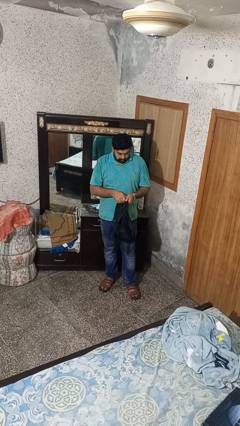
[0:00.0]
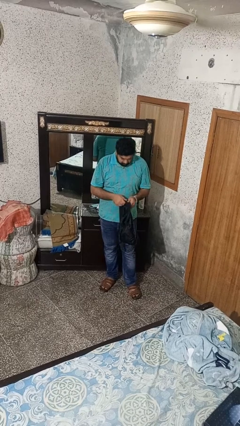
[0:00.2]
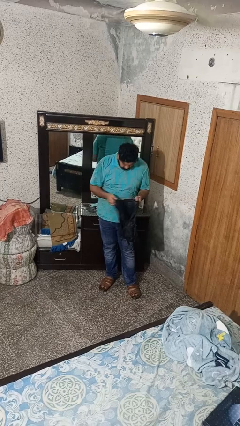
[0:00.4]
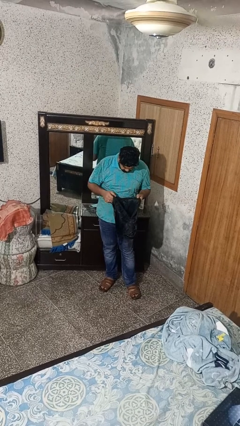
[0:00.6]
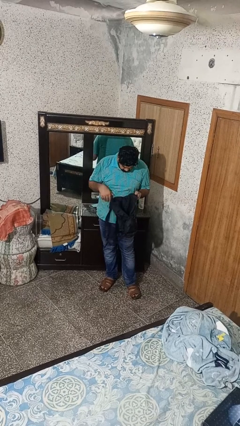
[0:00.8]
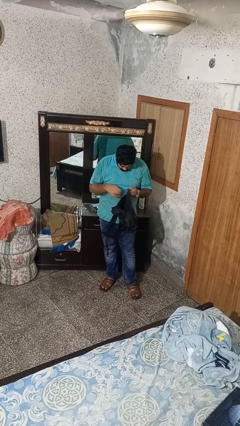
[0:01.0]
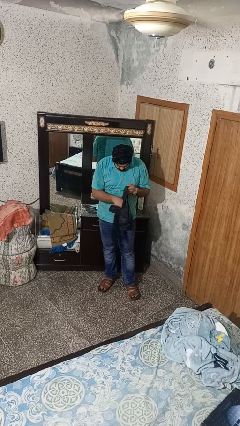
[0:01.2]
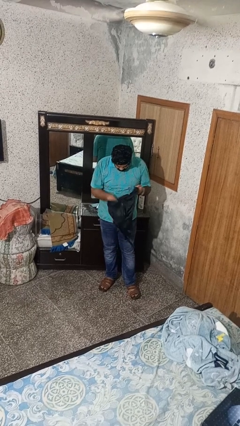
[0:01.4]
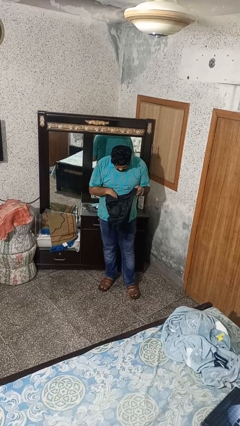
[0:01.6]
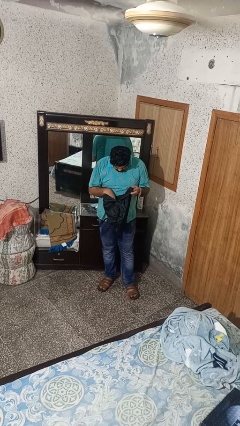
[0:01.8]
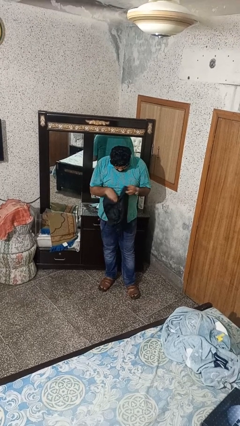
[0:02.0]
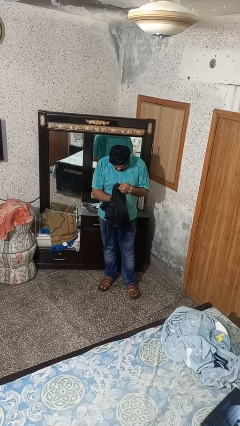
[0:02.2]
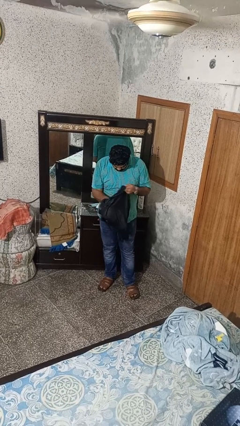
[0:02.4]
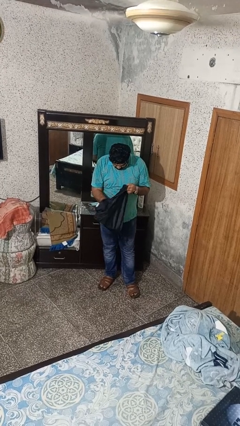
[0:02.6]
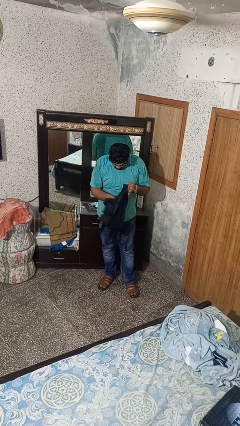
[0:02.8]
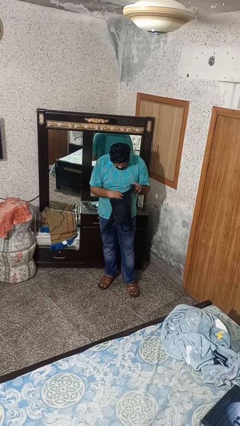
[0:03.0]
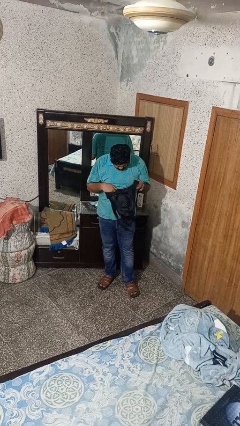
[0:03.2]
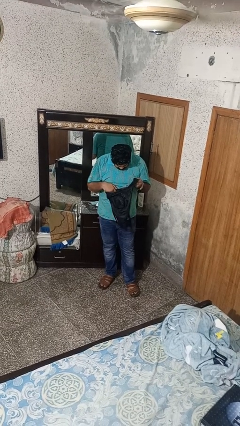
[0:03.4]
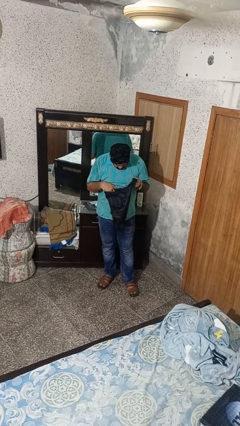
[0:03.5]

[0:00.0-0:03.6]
person searches in backpack

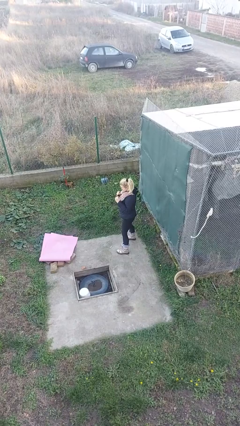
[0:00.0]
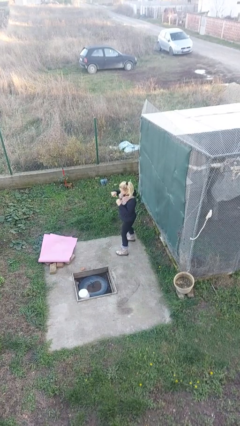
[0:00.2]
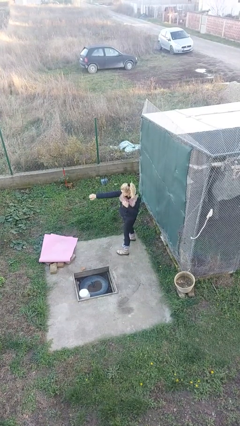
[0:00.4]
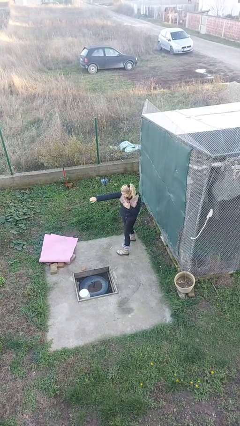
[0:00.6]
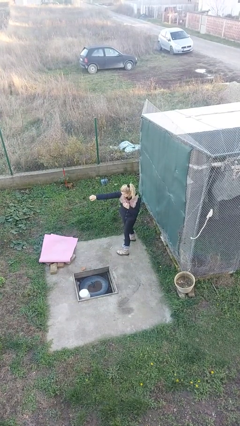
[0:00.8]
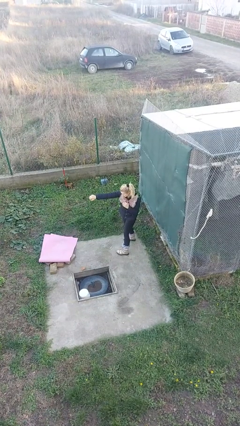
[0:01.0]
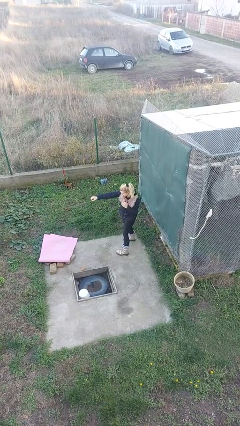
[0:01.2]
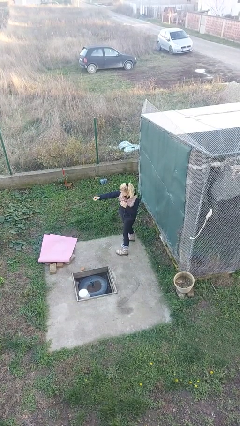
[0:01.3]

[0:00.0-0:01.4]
person punches

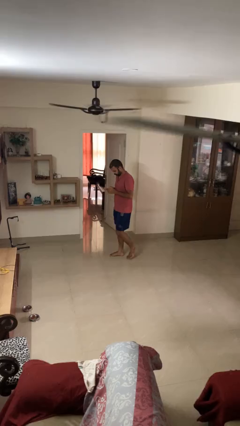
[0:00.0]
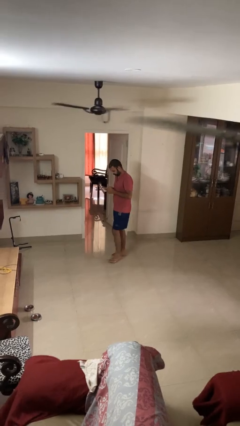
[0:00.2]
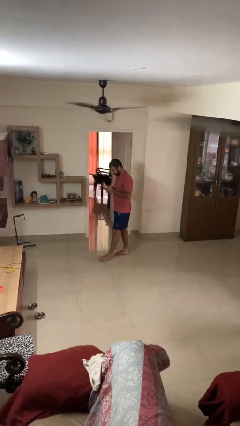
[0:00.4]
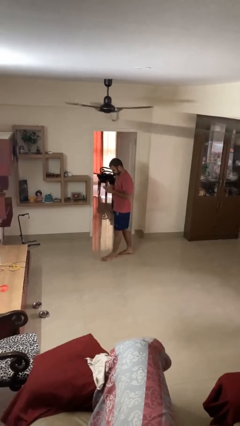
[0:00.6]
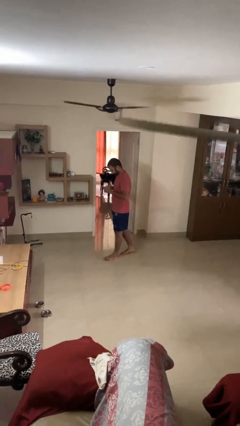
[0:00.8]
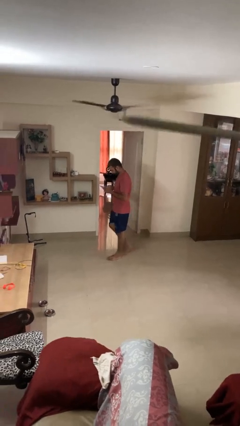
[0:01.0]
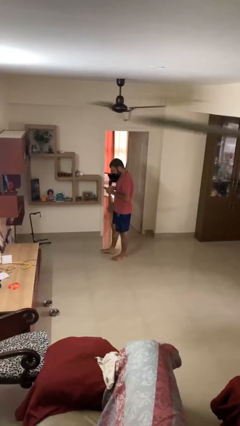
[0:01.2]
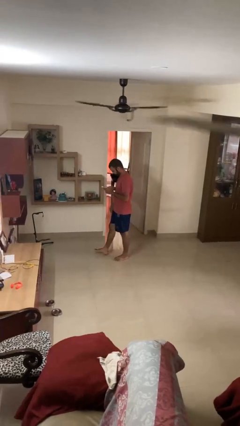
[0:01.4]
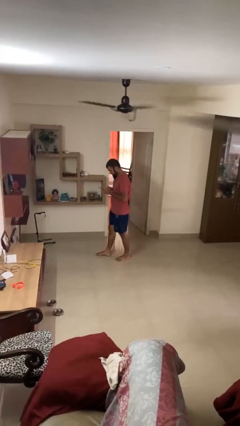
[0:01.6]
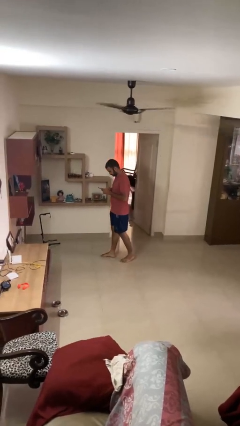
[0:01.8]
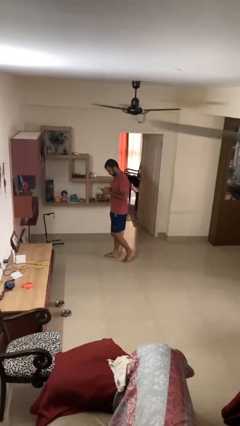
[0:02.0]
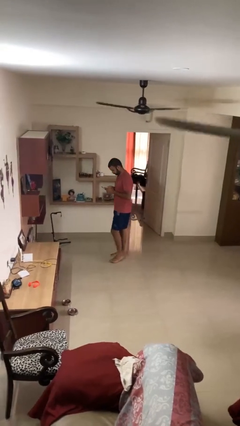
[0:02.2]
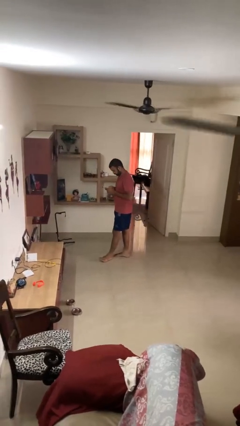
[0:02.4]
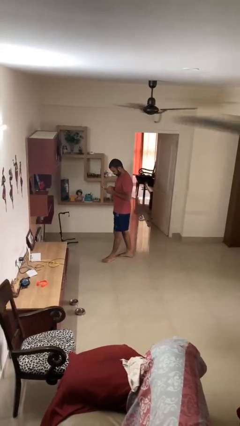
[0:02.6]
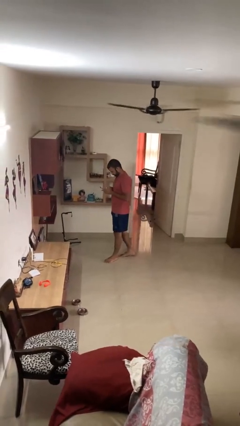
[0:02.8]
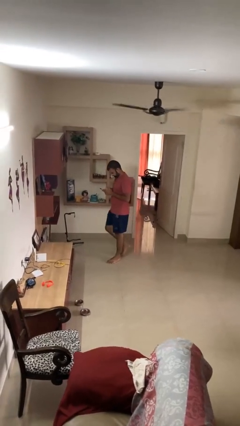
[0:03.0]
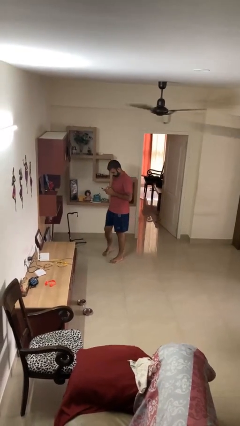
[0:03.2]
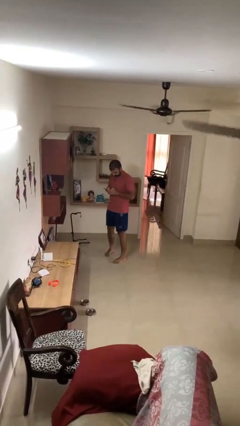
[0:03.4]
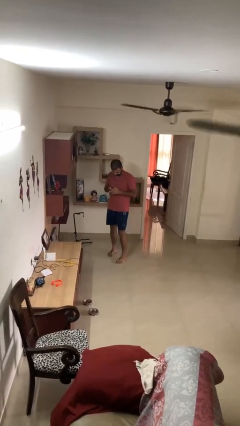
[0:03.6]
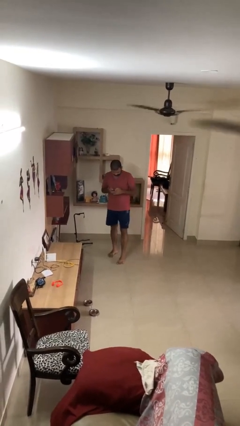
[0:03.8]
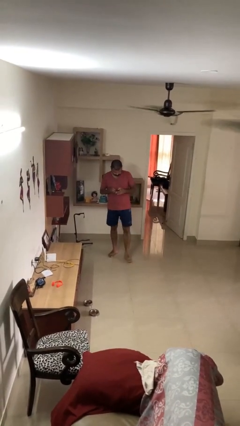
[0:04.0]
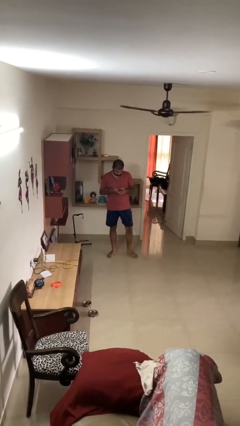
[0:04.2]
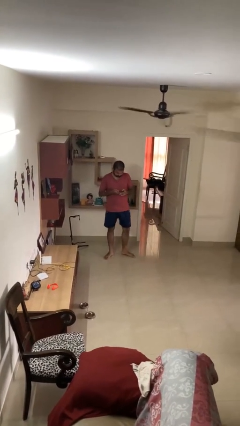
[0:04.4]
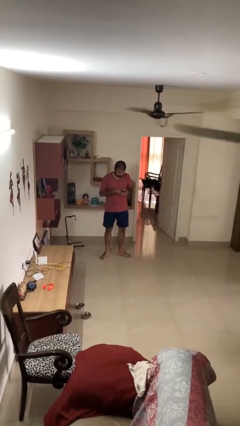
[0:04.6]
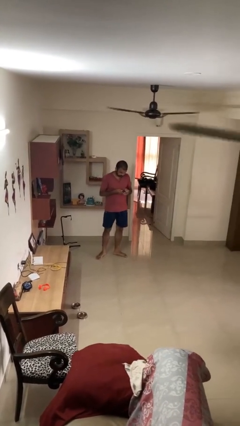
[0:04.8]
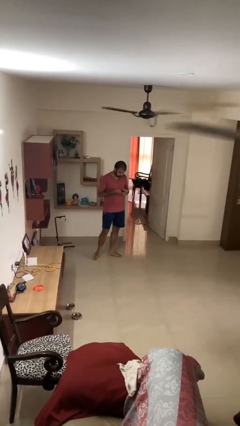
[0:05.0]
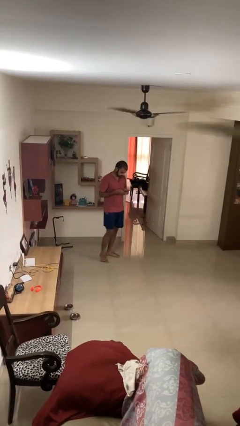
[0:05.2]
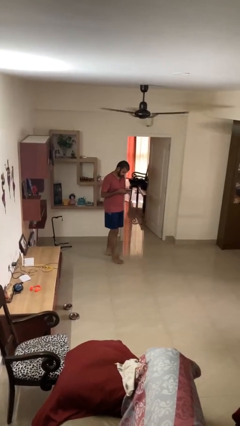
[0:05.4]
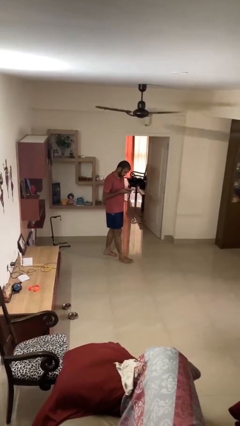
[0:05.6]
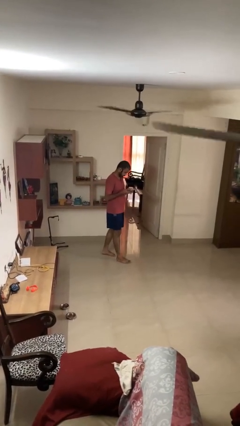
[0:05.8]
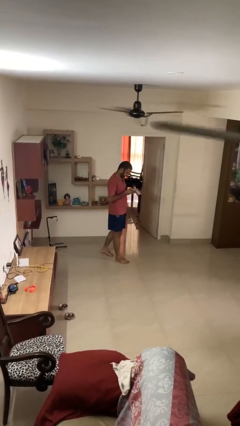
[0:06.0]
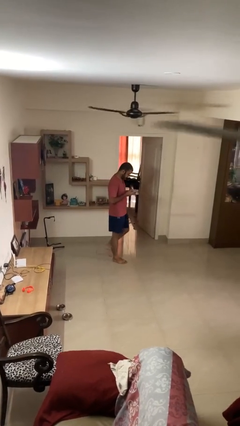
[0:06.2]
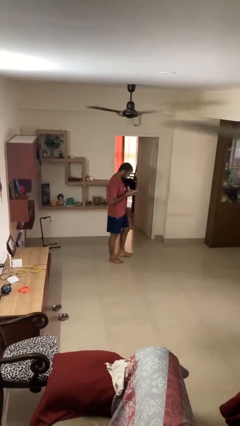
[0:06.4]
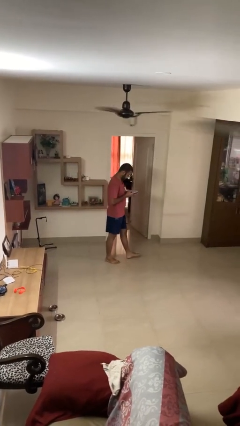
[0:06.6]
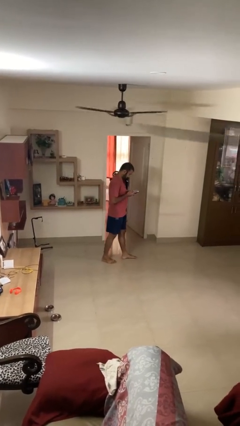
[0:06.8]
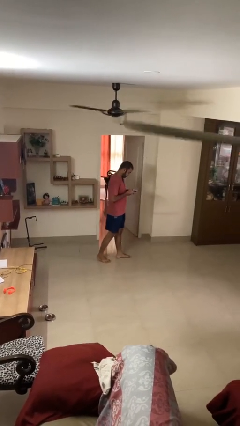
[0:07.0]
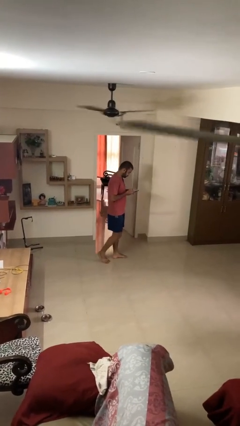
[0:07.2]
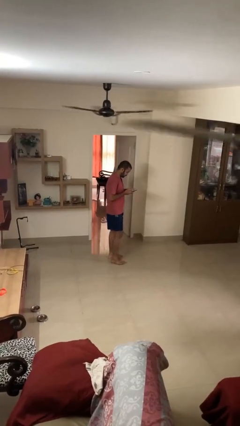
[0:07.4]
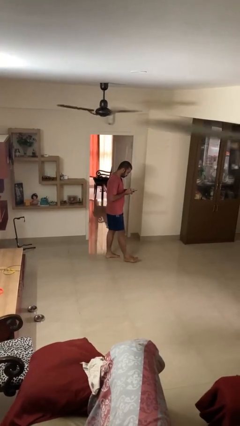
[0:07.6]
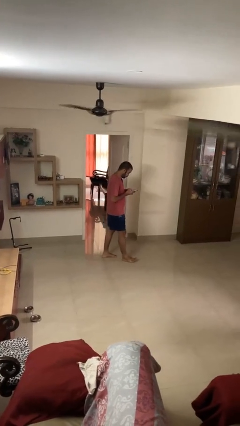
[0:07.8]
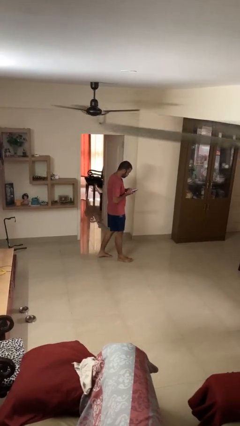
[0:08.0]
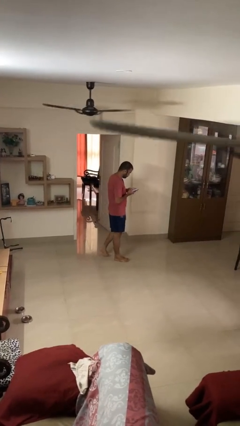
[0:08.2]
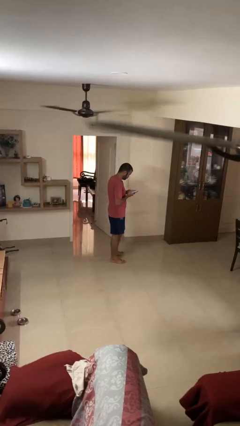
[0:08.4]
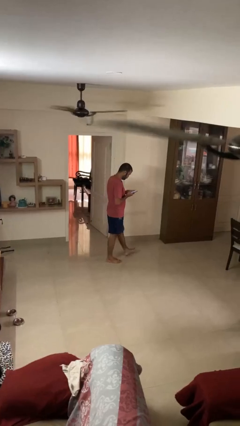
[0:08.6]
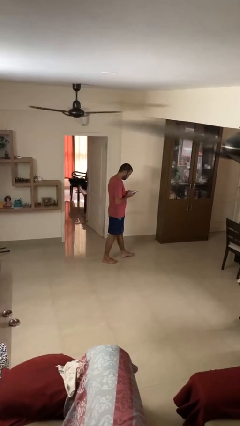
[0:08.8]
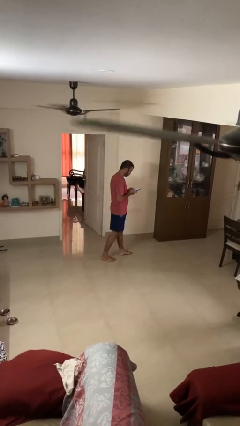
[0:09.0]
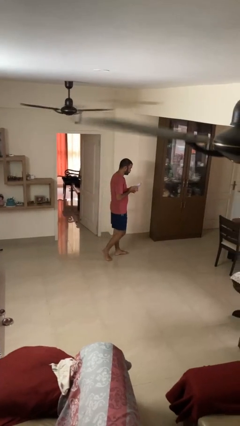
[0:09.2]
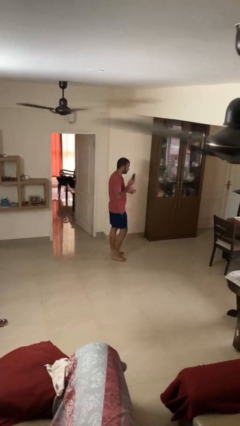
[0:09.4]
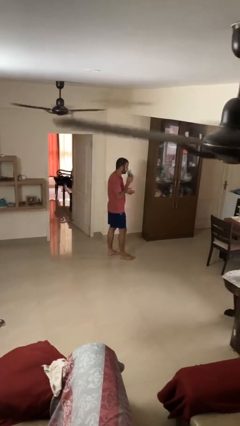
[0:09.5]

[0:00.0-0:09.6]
person texts on phone

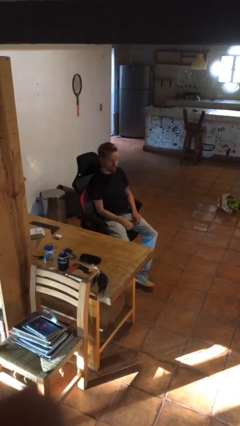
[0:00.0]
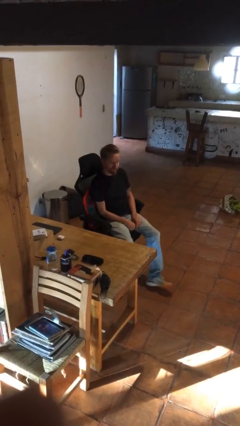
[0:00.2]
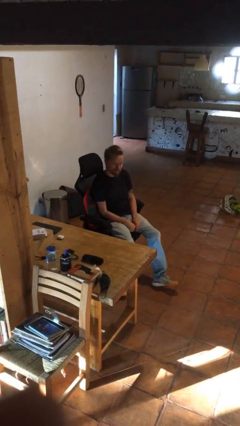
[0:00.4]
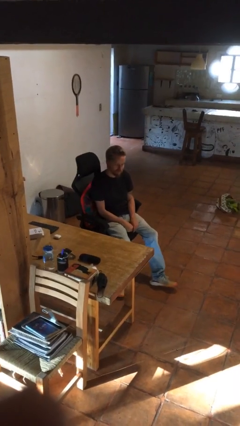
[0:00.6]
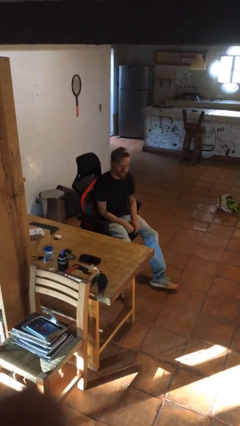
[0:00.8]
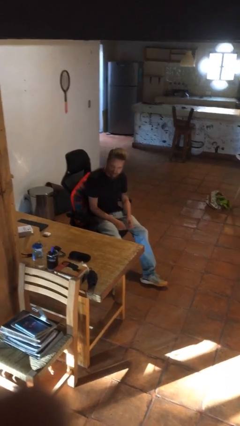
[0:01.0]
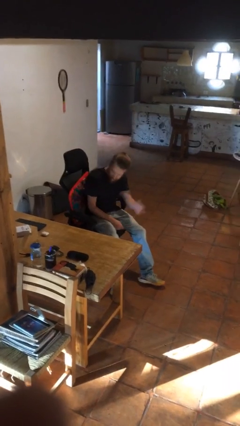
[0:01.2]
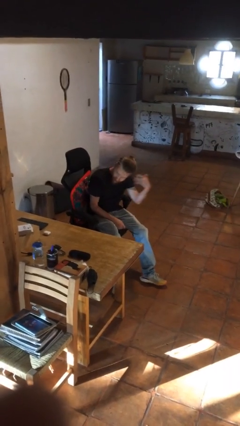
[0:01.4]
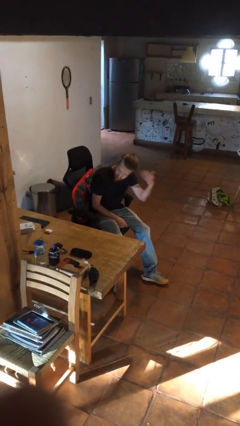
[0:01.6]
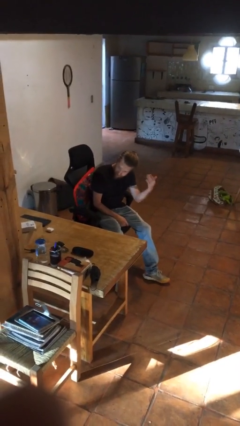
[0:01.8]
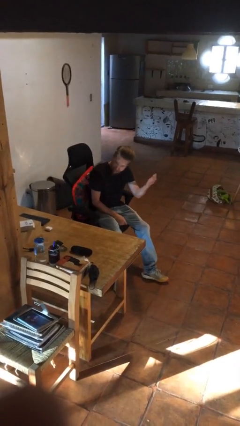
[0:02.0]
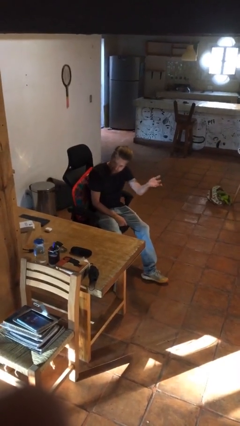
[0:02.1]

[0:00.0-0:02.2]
person gestures come here

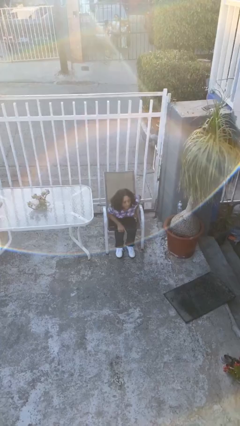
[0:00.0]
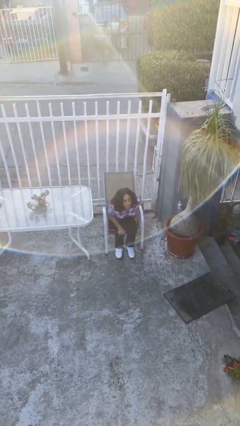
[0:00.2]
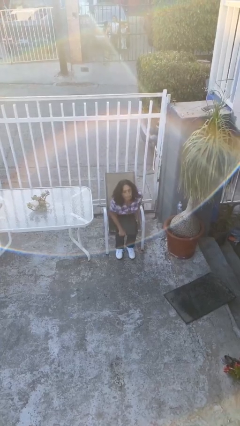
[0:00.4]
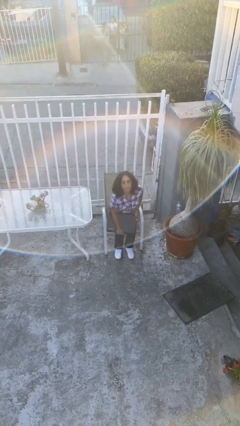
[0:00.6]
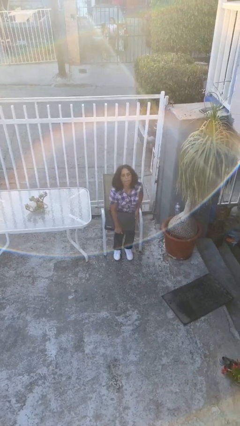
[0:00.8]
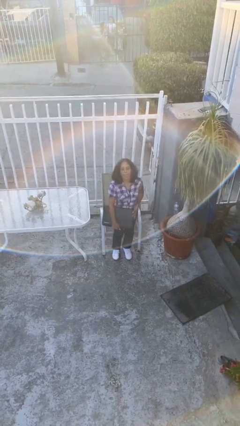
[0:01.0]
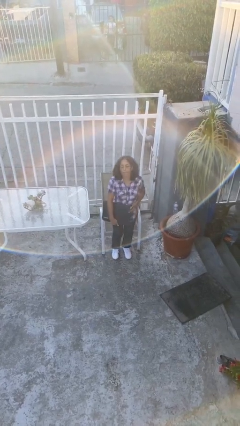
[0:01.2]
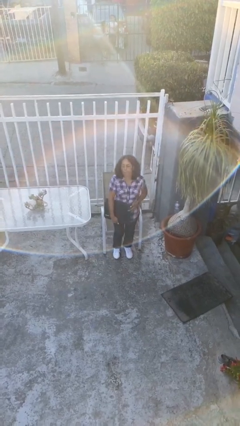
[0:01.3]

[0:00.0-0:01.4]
person stands up
